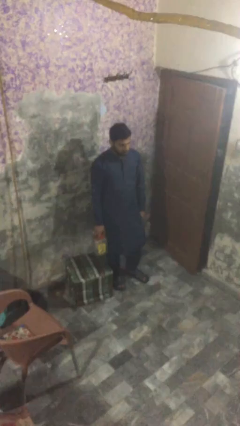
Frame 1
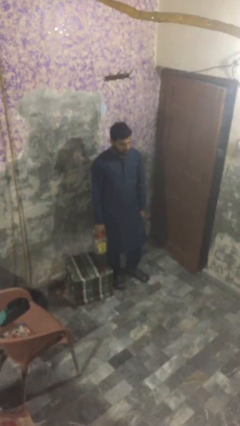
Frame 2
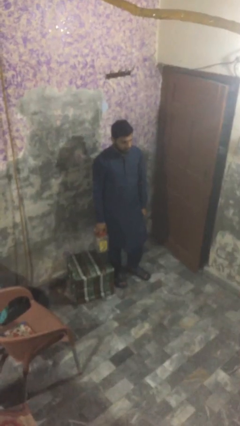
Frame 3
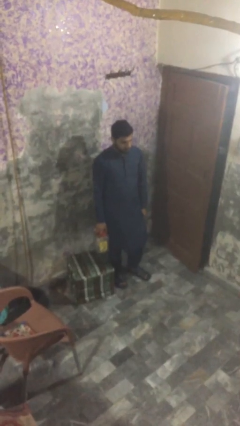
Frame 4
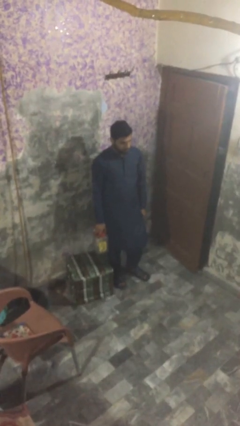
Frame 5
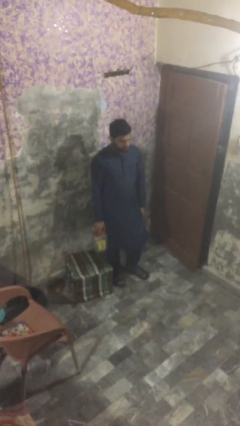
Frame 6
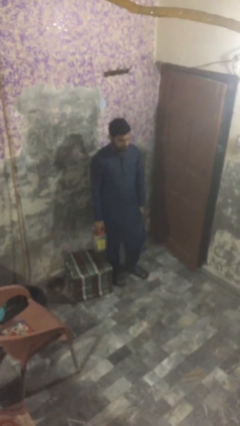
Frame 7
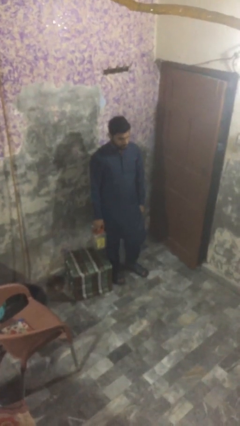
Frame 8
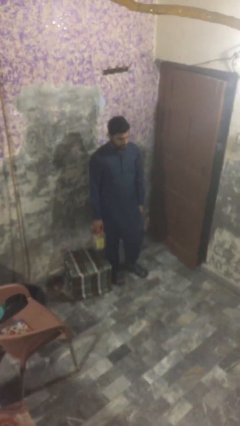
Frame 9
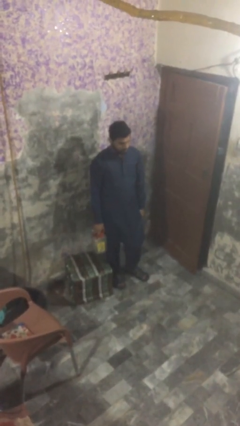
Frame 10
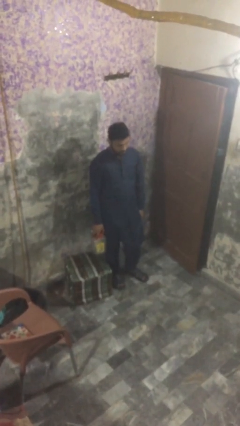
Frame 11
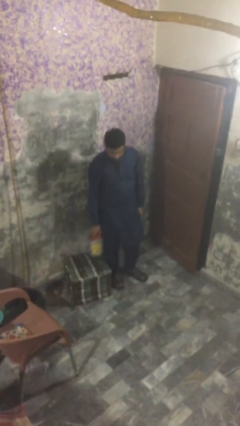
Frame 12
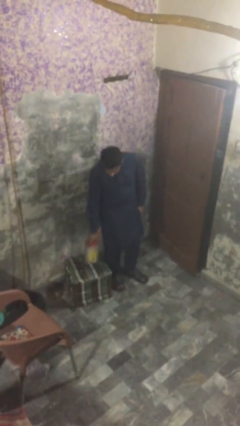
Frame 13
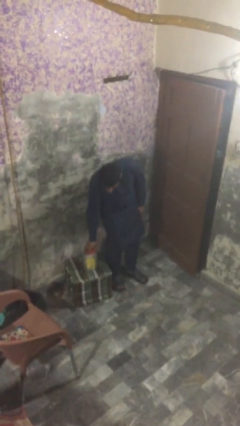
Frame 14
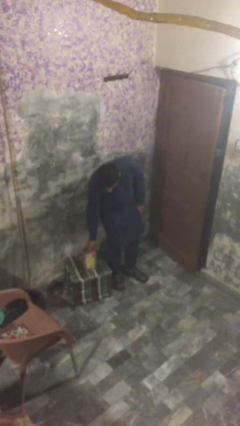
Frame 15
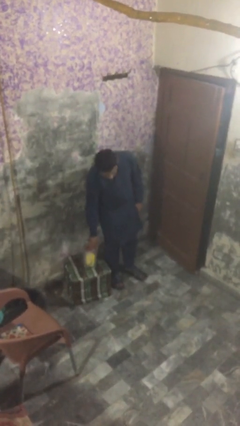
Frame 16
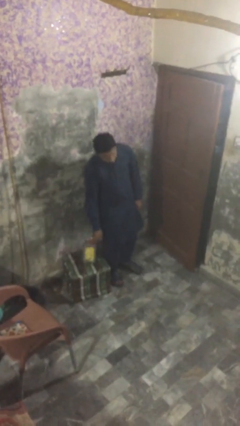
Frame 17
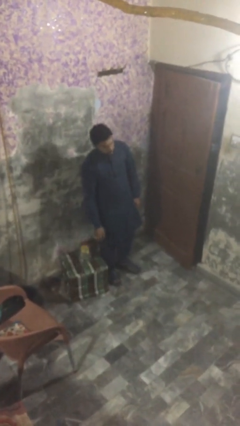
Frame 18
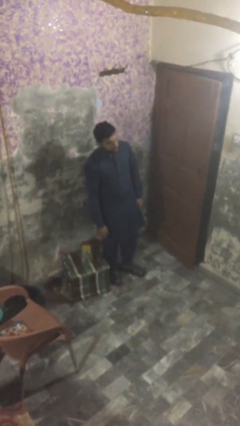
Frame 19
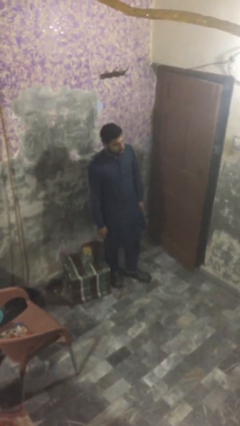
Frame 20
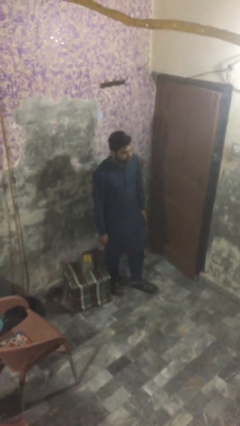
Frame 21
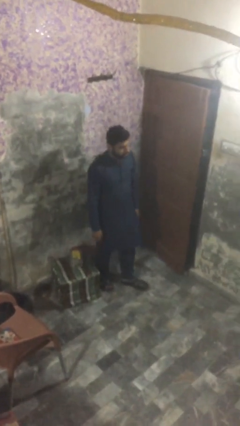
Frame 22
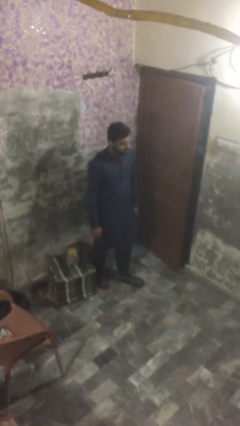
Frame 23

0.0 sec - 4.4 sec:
person puts down object on table

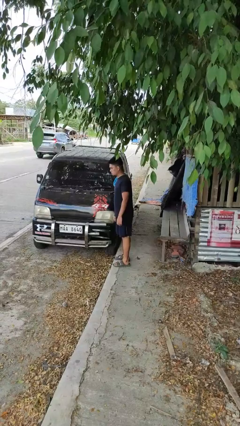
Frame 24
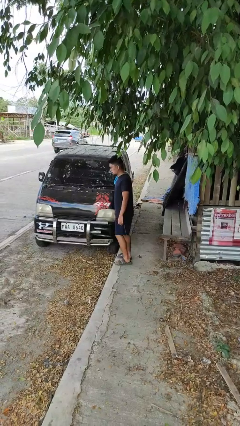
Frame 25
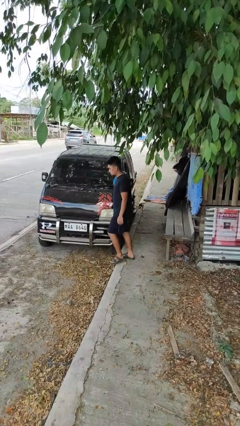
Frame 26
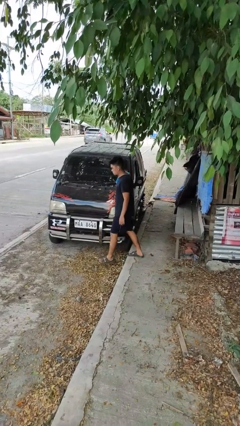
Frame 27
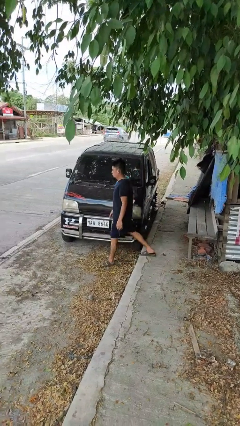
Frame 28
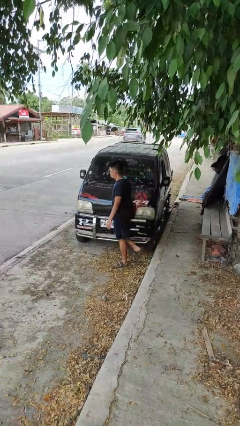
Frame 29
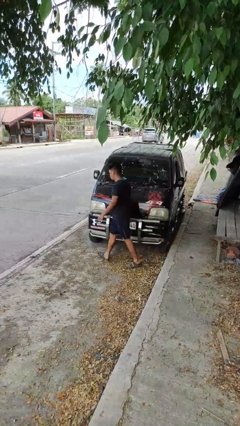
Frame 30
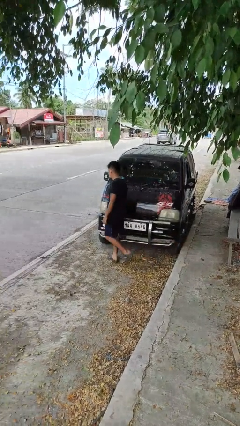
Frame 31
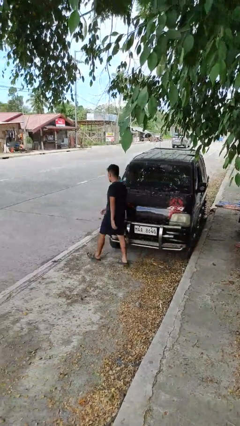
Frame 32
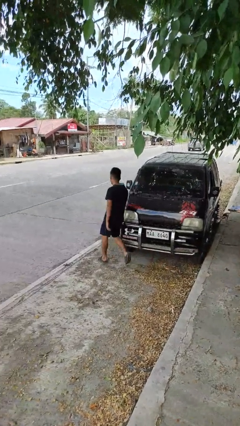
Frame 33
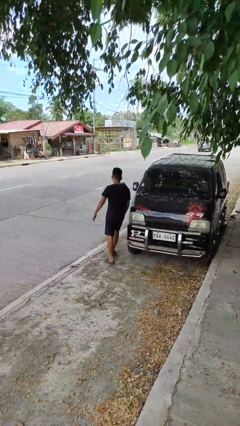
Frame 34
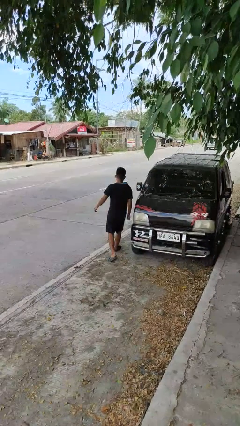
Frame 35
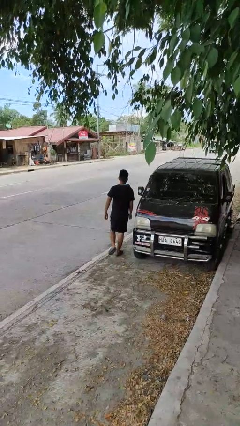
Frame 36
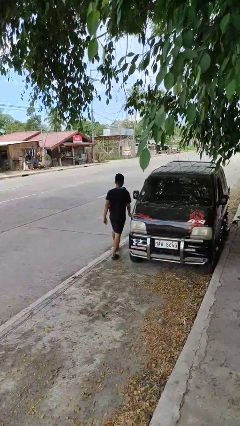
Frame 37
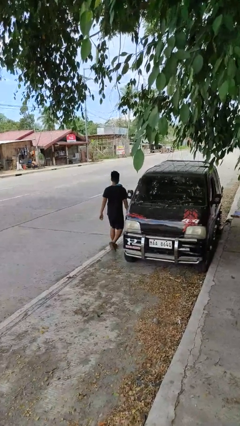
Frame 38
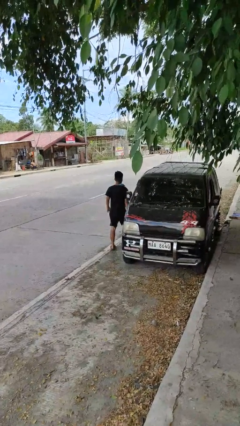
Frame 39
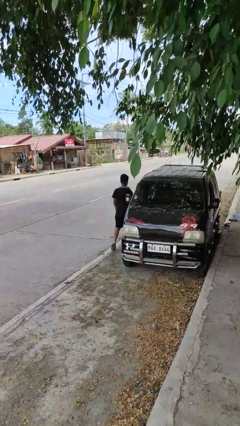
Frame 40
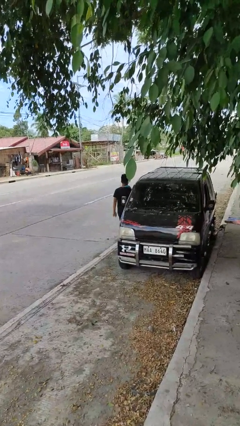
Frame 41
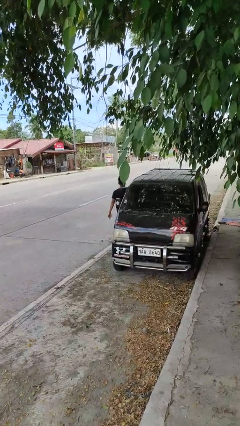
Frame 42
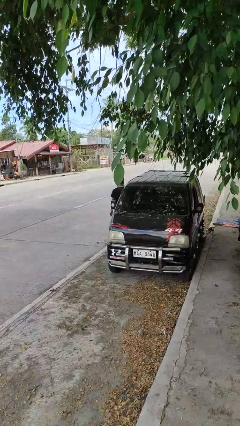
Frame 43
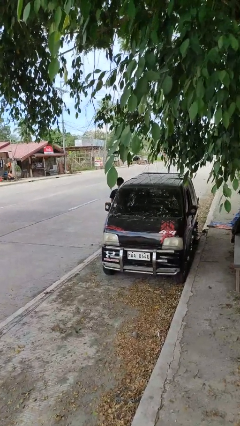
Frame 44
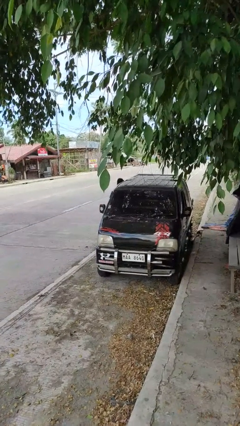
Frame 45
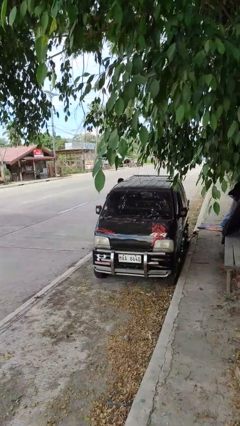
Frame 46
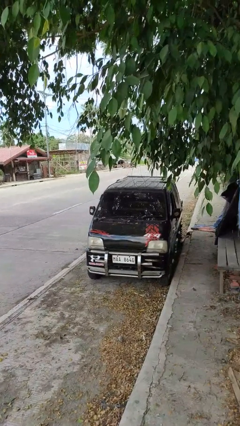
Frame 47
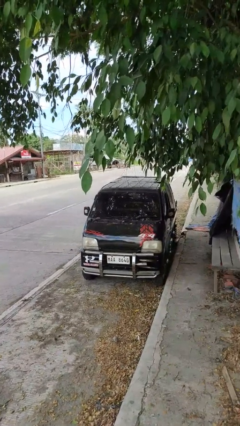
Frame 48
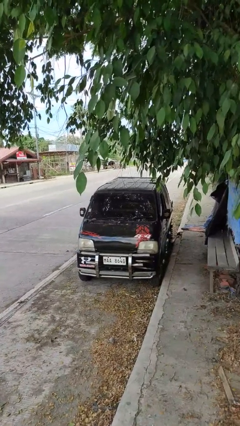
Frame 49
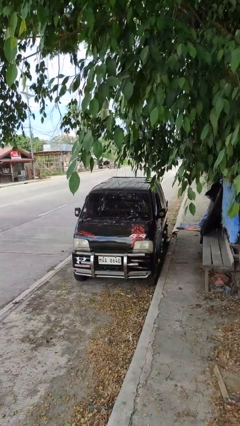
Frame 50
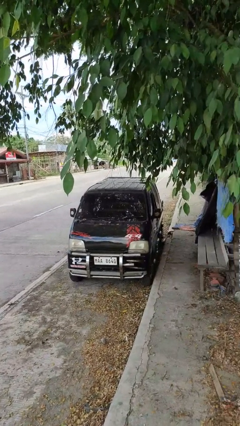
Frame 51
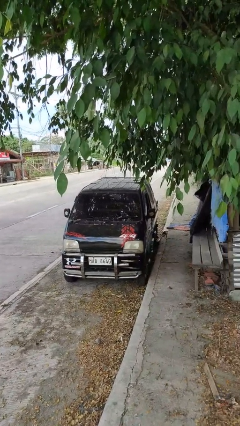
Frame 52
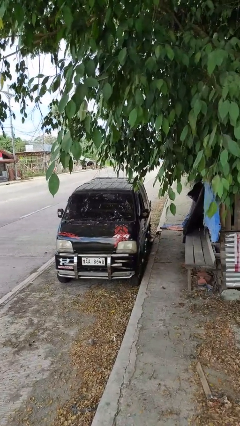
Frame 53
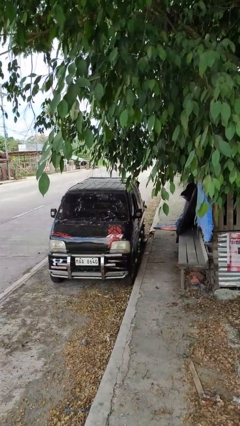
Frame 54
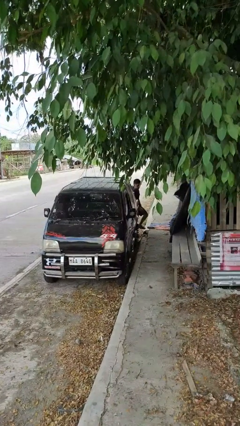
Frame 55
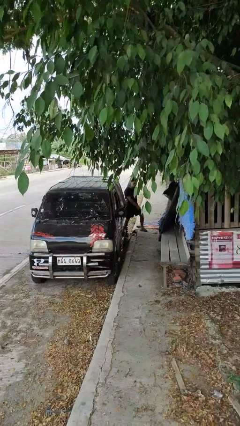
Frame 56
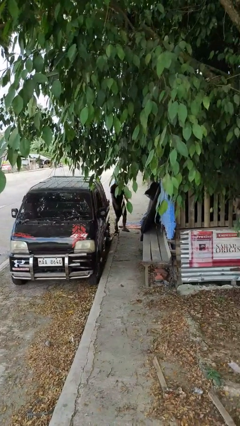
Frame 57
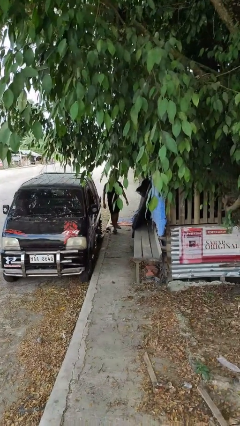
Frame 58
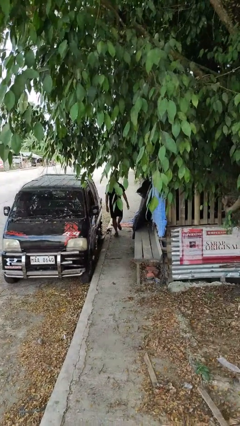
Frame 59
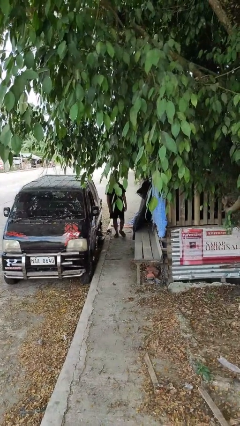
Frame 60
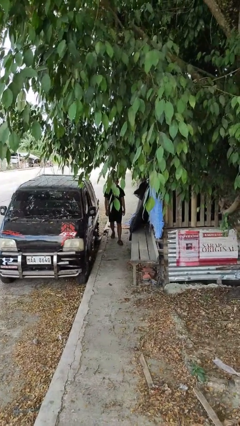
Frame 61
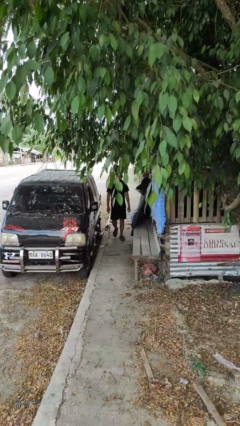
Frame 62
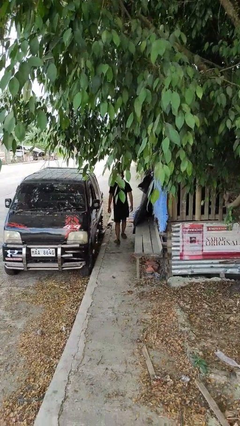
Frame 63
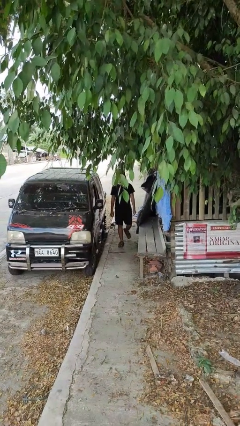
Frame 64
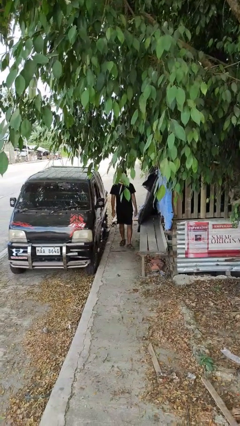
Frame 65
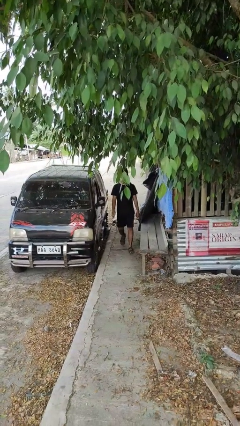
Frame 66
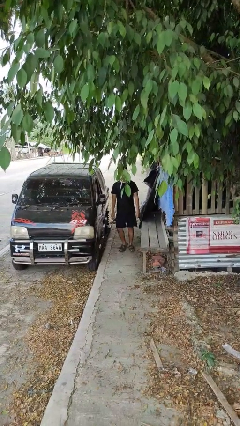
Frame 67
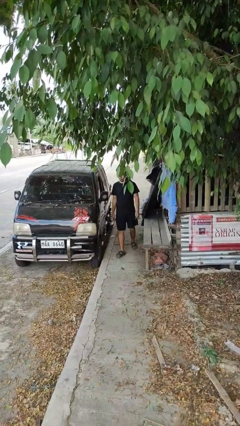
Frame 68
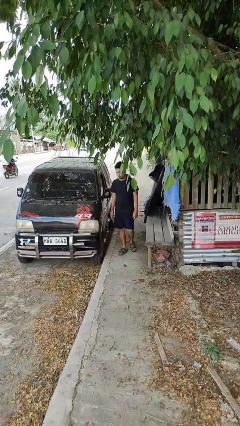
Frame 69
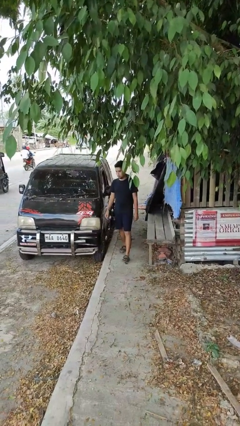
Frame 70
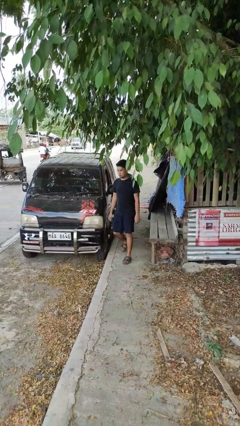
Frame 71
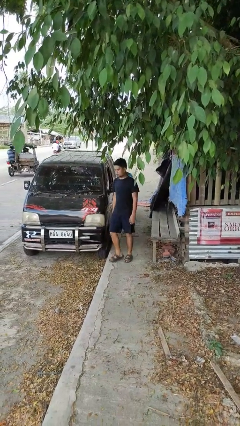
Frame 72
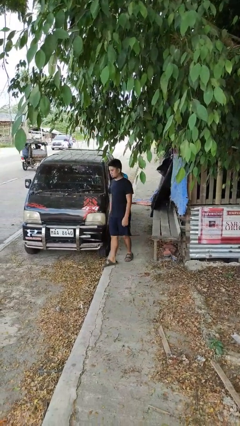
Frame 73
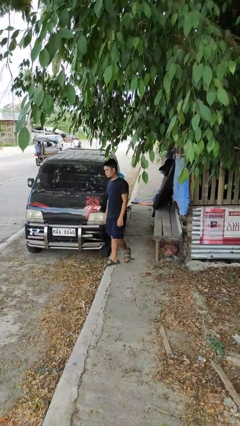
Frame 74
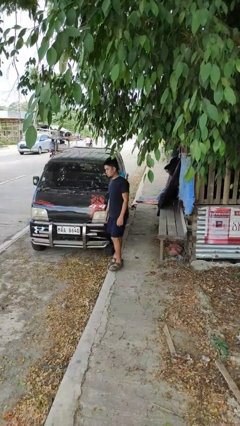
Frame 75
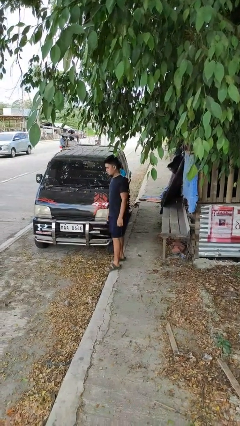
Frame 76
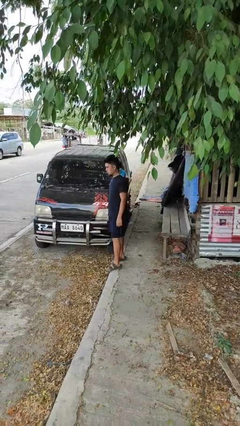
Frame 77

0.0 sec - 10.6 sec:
person walks around car

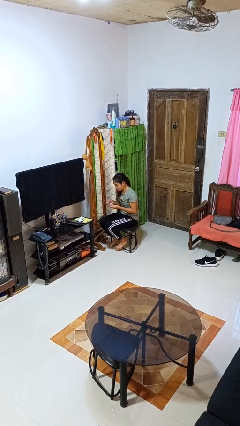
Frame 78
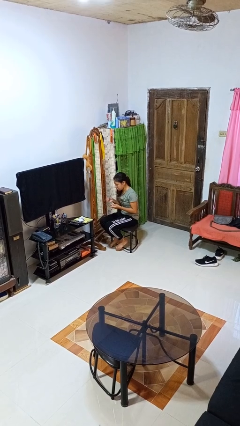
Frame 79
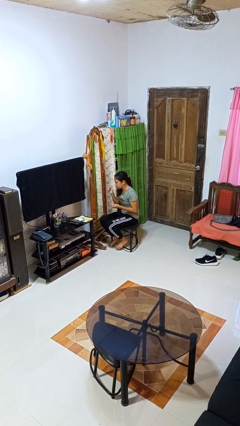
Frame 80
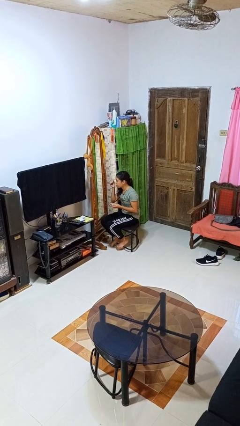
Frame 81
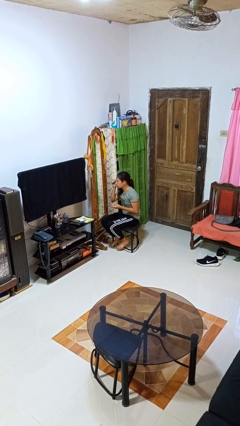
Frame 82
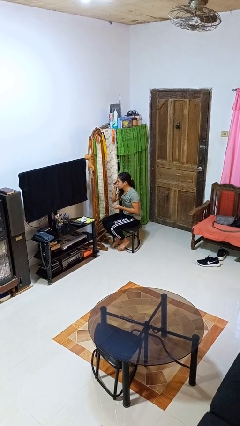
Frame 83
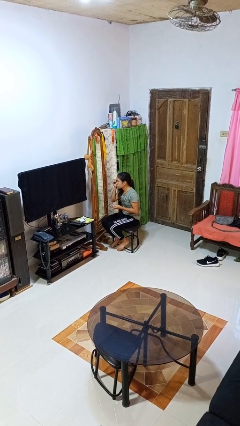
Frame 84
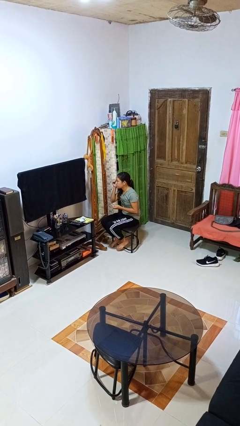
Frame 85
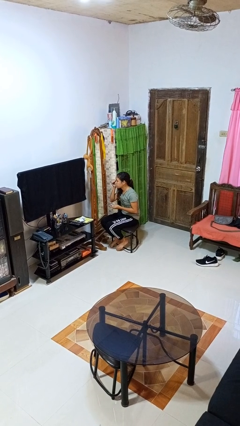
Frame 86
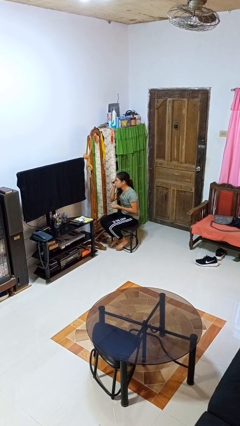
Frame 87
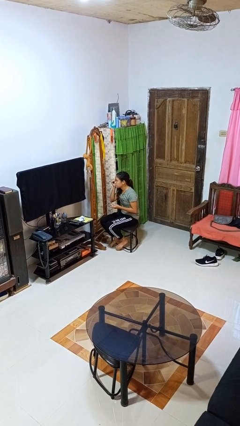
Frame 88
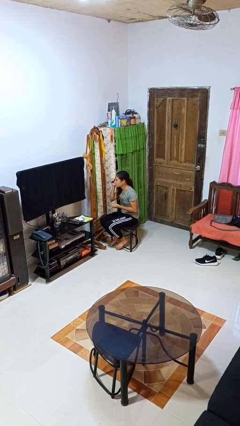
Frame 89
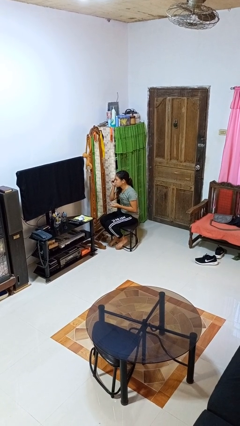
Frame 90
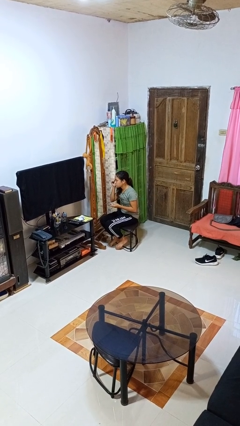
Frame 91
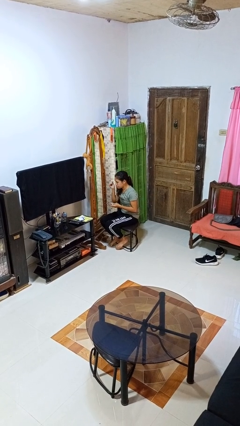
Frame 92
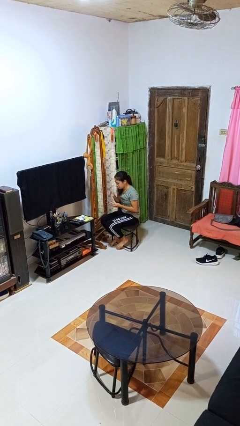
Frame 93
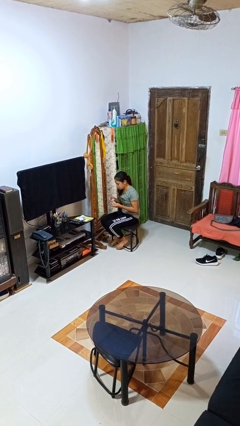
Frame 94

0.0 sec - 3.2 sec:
person applies eye makeup
